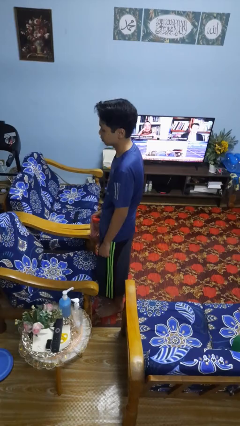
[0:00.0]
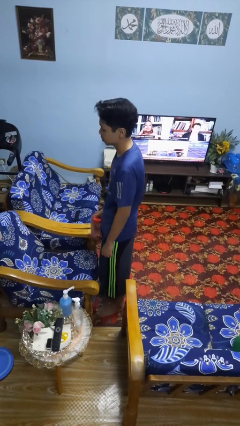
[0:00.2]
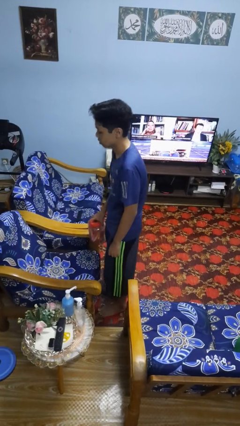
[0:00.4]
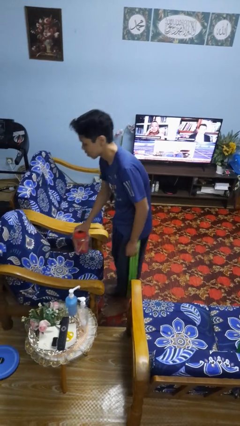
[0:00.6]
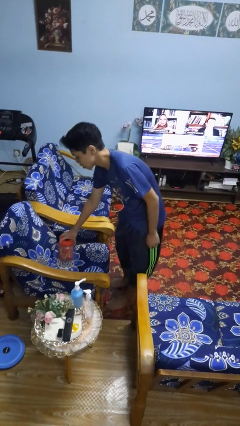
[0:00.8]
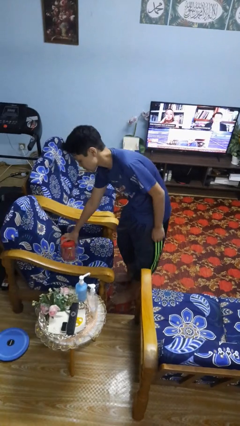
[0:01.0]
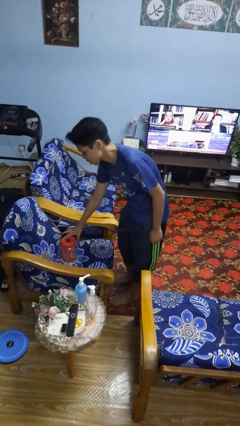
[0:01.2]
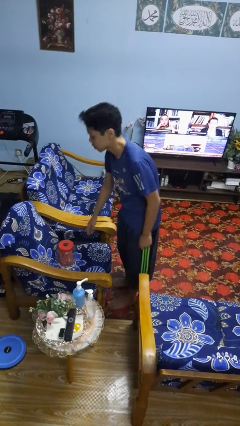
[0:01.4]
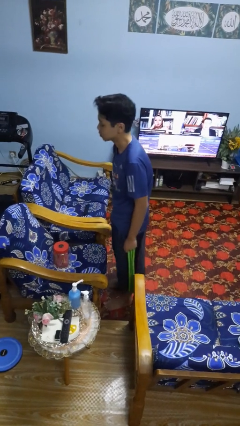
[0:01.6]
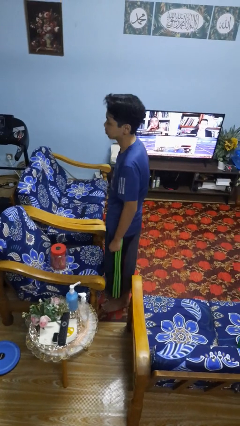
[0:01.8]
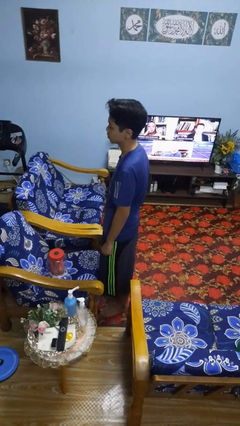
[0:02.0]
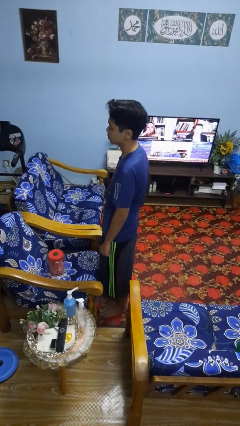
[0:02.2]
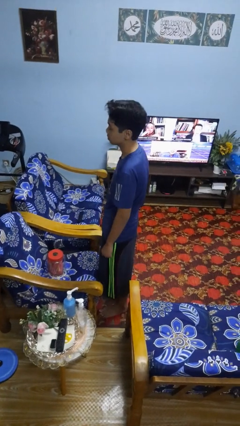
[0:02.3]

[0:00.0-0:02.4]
person puts down object on couch

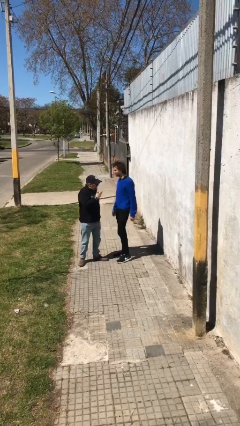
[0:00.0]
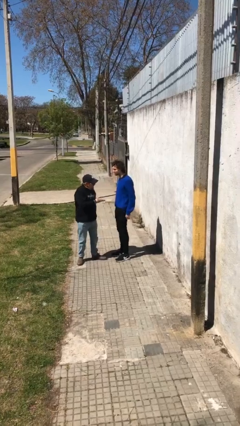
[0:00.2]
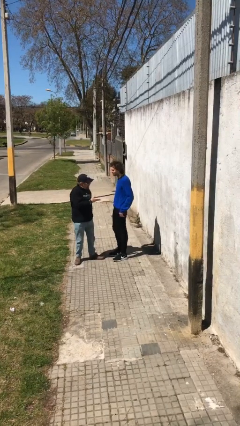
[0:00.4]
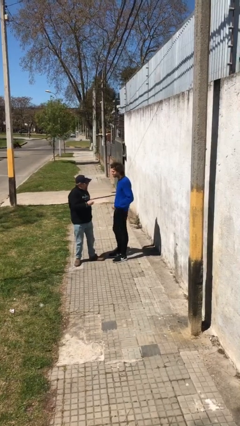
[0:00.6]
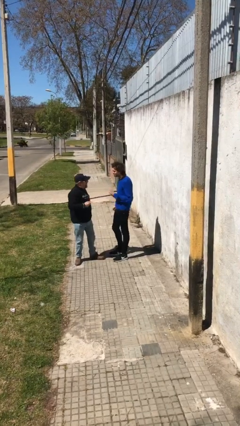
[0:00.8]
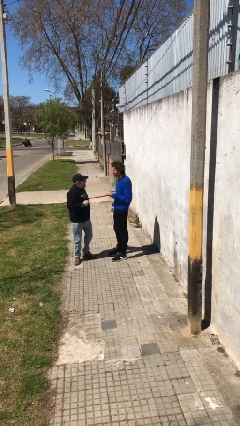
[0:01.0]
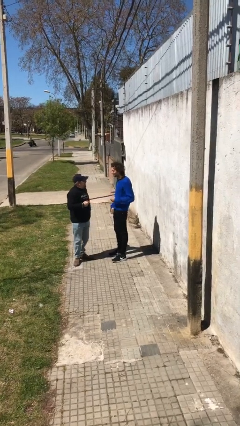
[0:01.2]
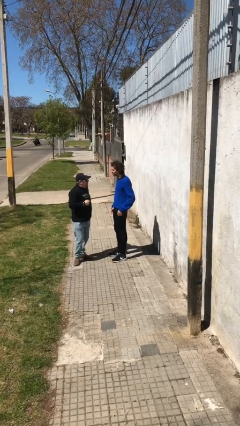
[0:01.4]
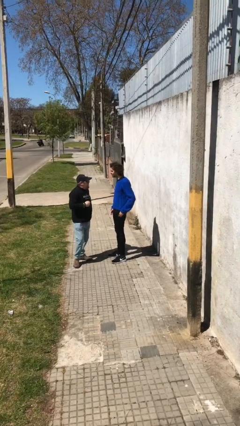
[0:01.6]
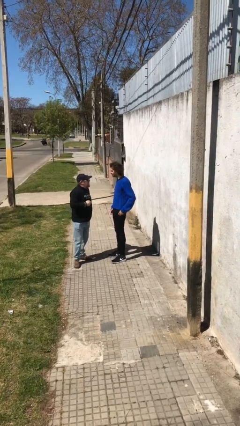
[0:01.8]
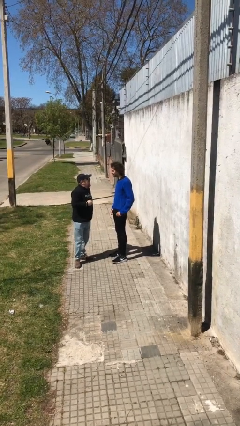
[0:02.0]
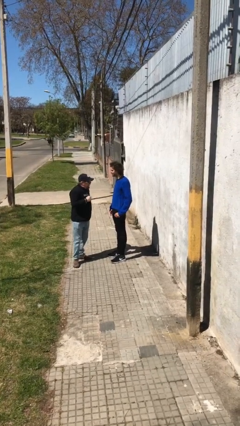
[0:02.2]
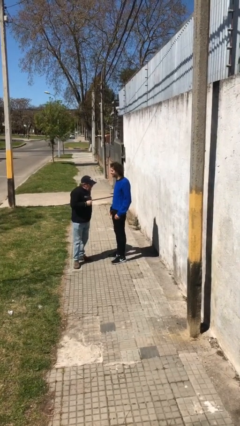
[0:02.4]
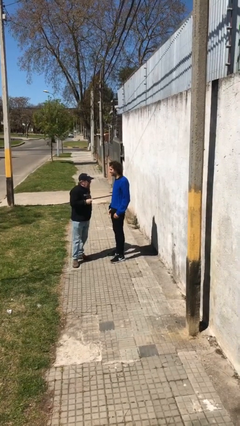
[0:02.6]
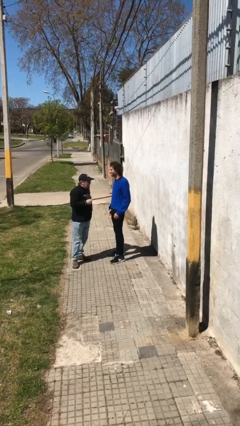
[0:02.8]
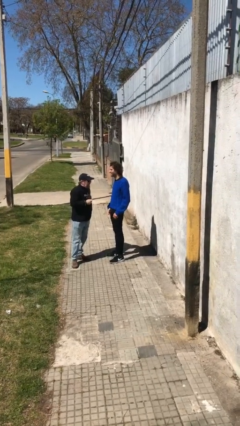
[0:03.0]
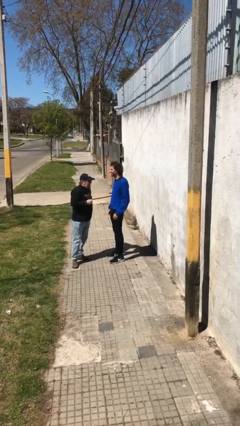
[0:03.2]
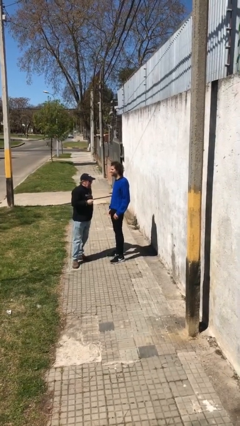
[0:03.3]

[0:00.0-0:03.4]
person talks to person

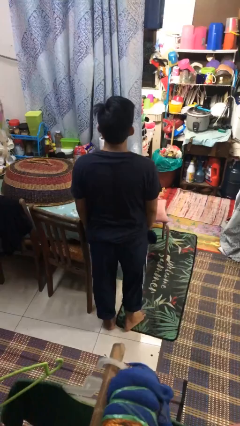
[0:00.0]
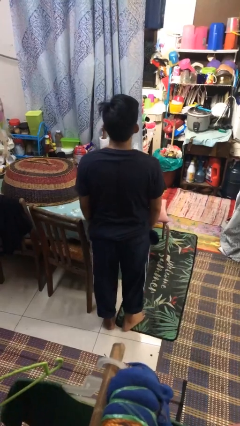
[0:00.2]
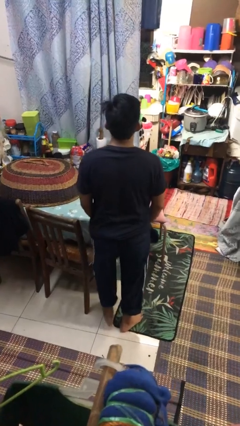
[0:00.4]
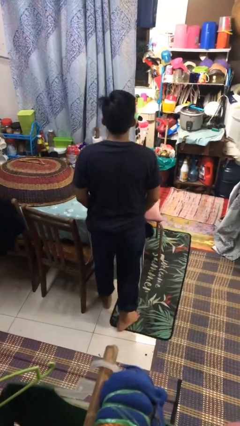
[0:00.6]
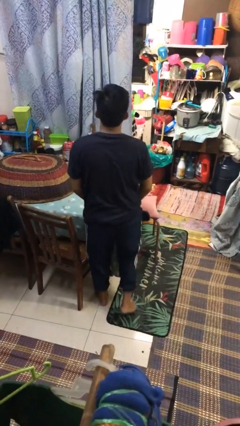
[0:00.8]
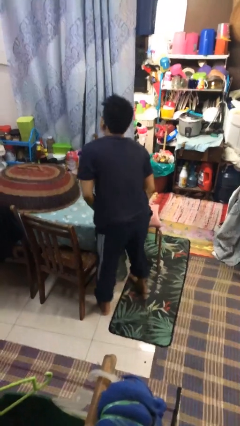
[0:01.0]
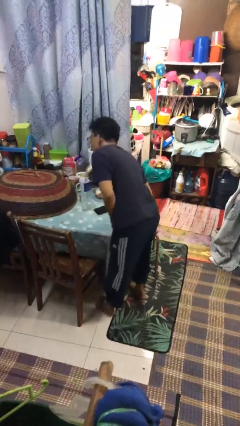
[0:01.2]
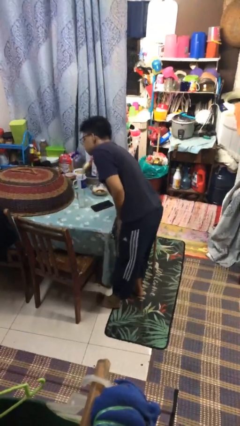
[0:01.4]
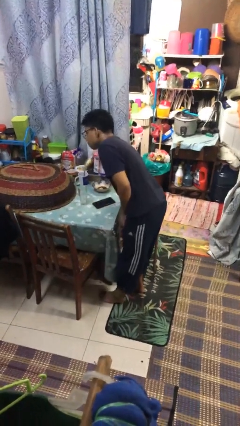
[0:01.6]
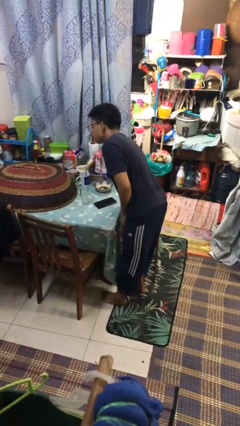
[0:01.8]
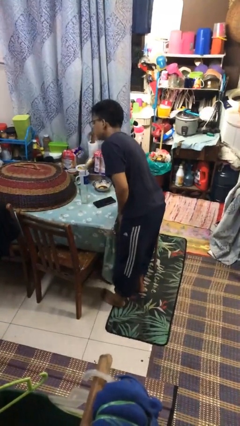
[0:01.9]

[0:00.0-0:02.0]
person bumps into table

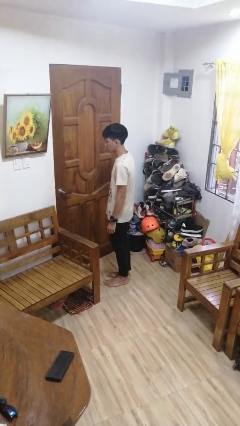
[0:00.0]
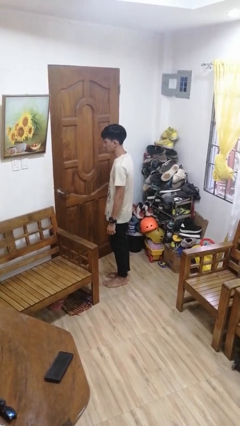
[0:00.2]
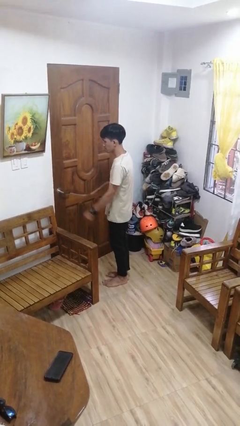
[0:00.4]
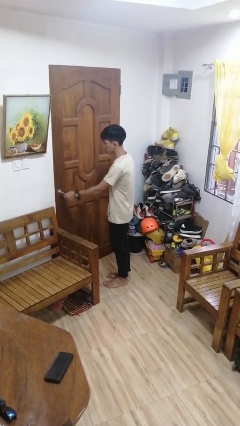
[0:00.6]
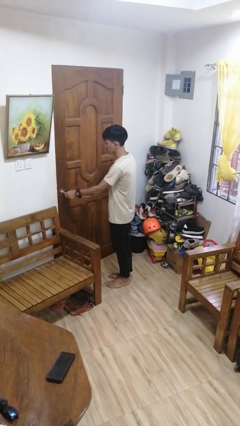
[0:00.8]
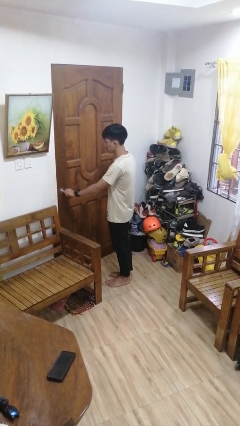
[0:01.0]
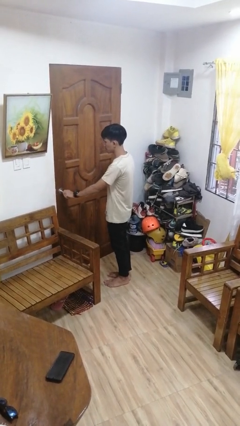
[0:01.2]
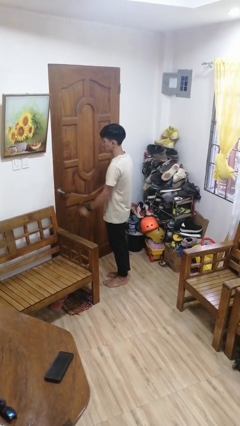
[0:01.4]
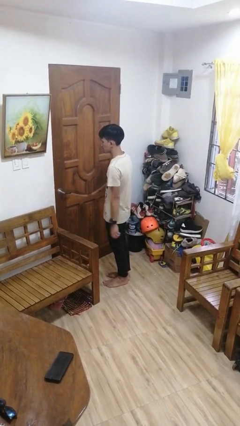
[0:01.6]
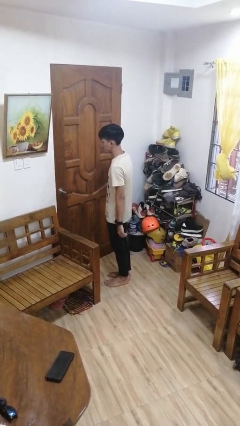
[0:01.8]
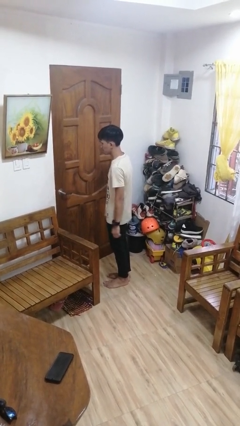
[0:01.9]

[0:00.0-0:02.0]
person unlocks door with keys

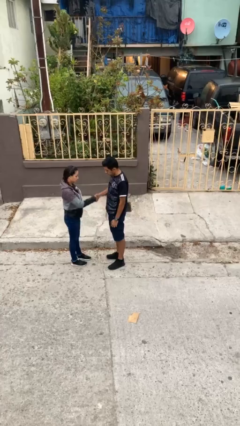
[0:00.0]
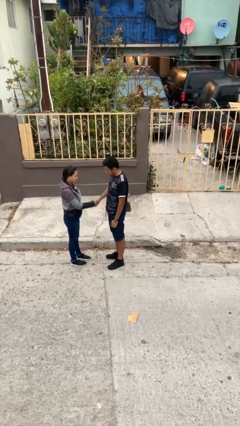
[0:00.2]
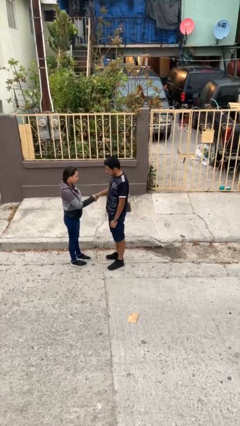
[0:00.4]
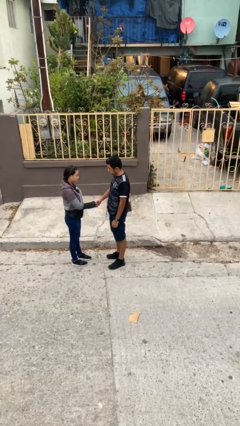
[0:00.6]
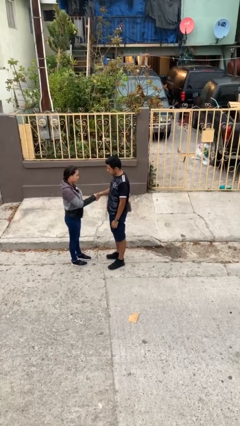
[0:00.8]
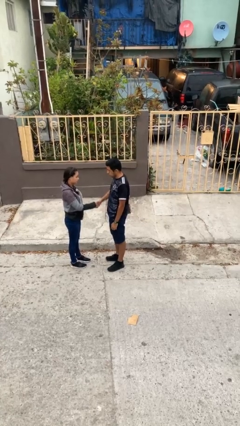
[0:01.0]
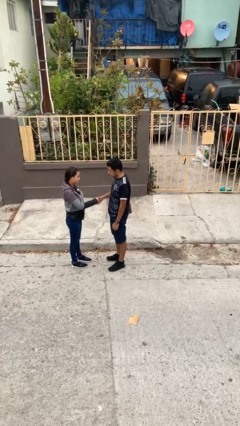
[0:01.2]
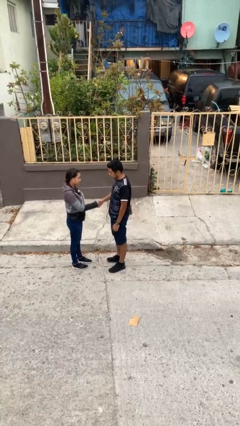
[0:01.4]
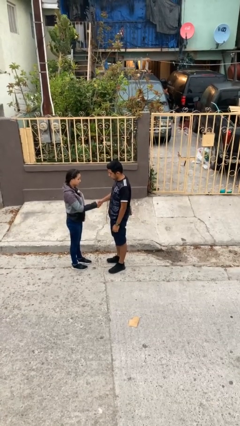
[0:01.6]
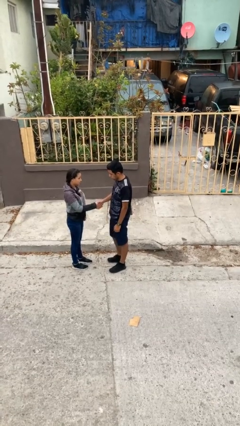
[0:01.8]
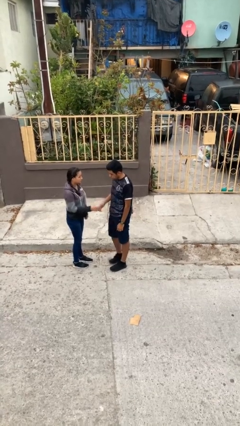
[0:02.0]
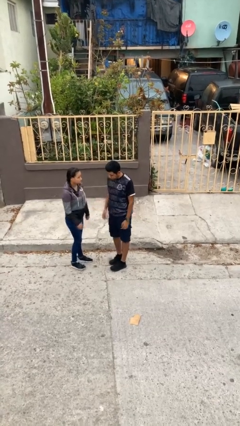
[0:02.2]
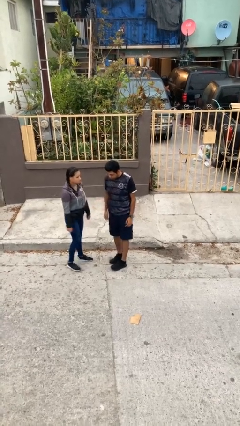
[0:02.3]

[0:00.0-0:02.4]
person shakes hand

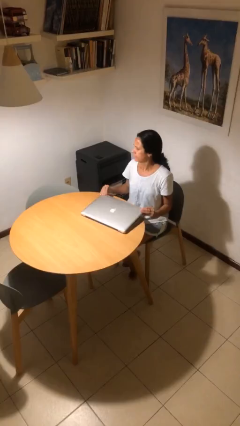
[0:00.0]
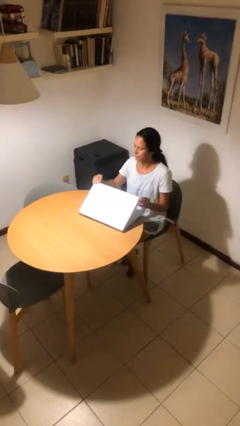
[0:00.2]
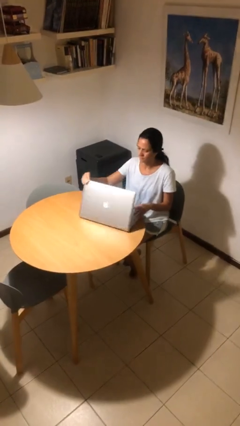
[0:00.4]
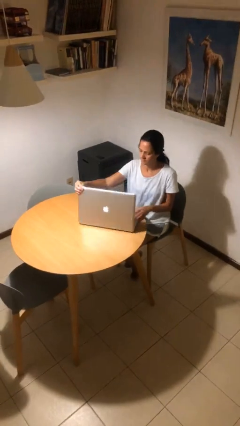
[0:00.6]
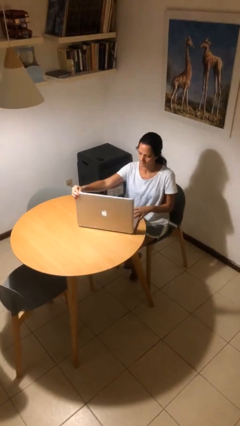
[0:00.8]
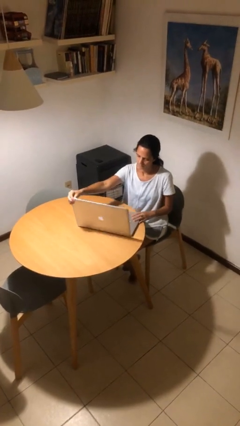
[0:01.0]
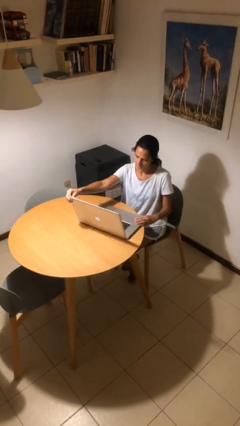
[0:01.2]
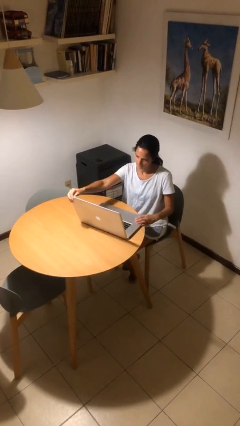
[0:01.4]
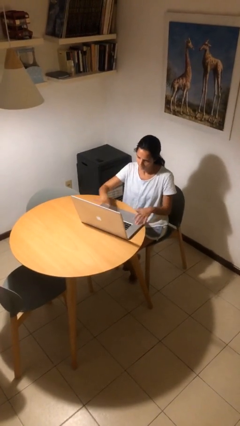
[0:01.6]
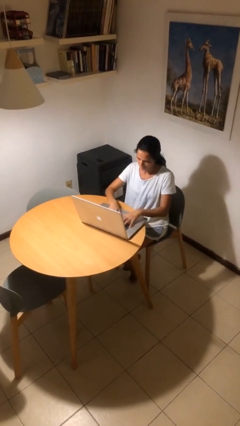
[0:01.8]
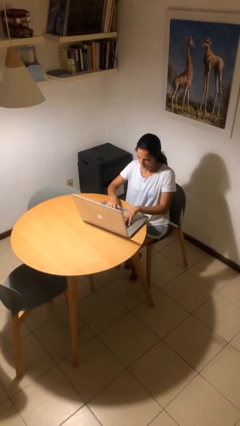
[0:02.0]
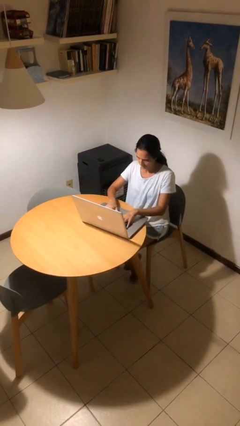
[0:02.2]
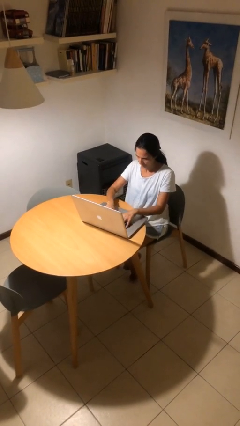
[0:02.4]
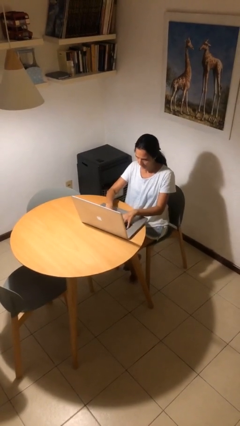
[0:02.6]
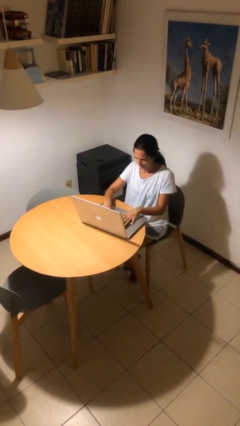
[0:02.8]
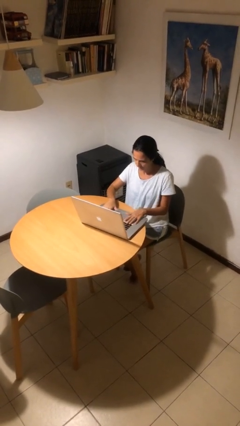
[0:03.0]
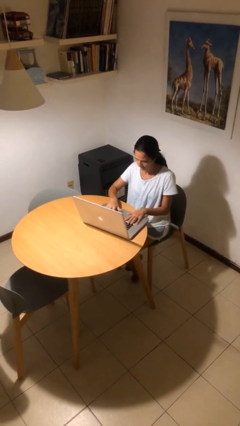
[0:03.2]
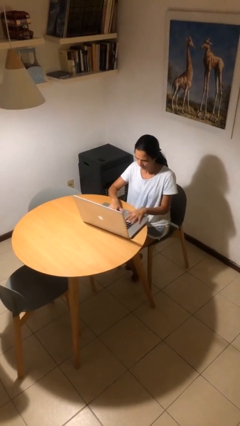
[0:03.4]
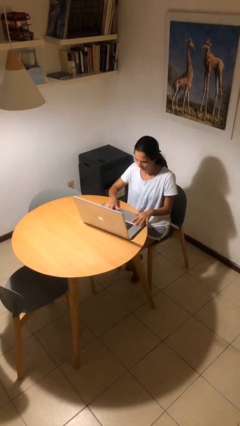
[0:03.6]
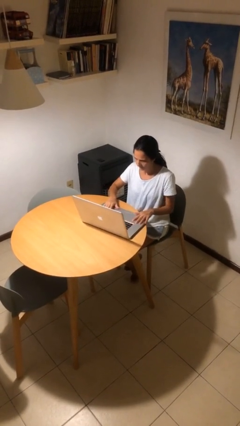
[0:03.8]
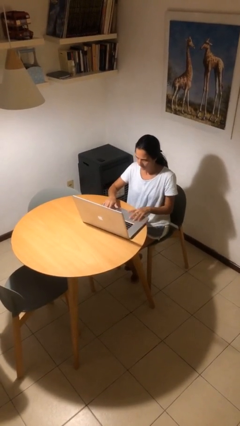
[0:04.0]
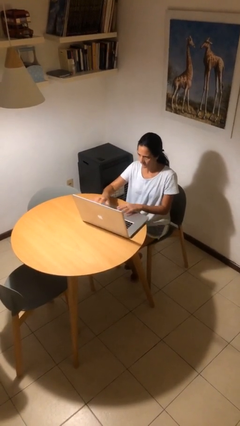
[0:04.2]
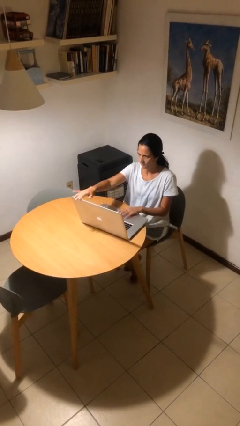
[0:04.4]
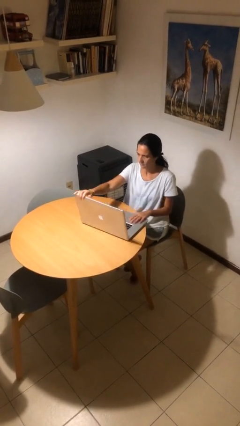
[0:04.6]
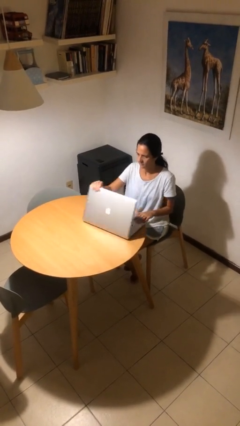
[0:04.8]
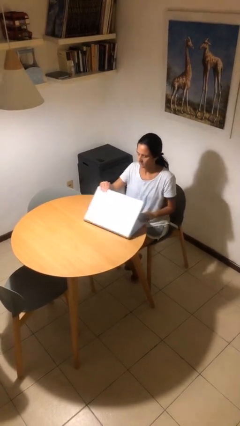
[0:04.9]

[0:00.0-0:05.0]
person interacts with laptop

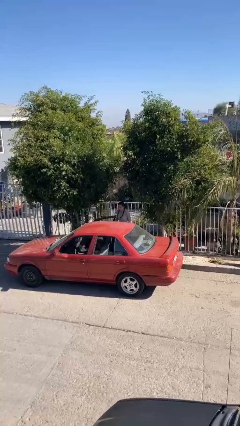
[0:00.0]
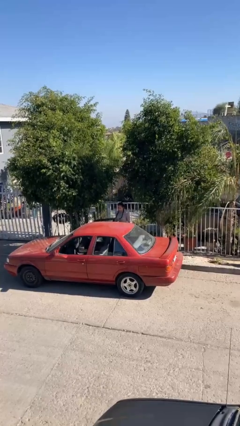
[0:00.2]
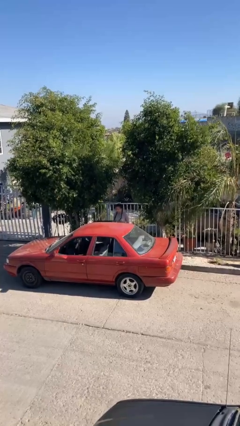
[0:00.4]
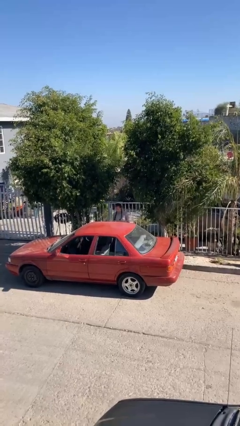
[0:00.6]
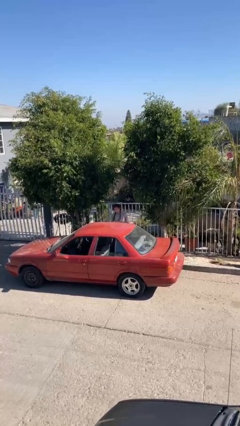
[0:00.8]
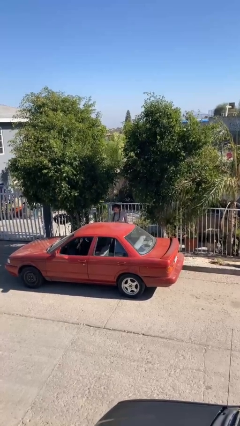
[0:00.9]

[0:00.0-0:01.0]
person closes car door
